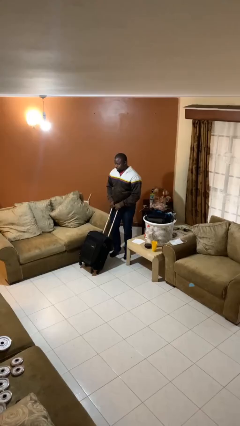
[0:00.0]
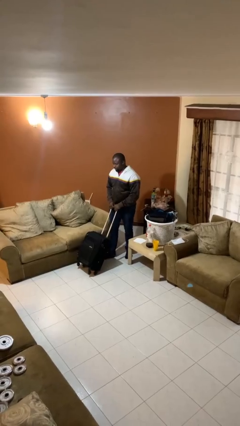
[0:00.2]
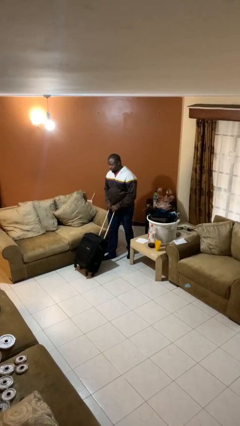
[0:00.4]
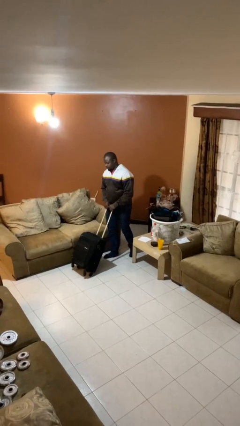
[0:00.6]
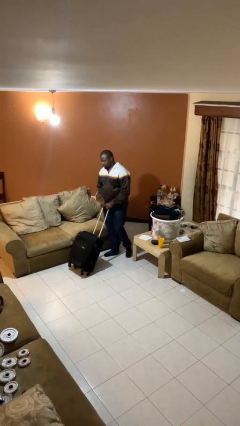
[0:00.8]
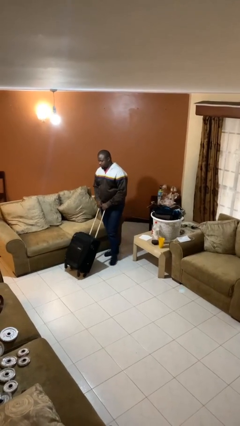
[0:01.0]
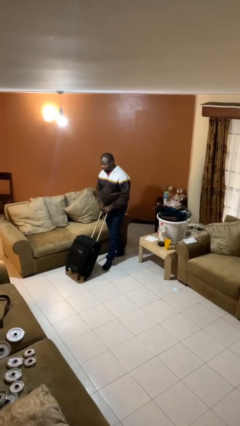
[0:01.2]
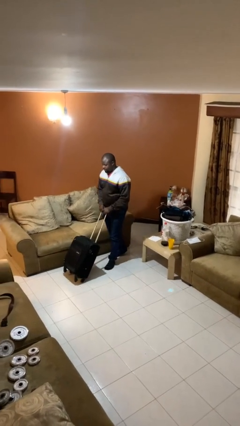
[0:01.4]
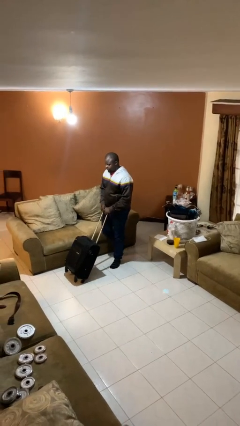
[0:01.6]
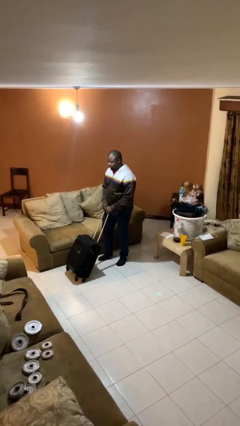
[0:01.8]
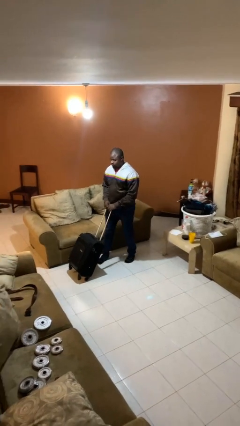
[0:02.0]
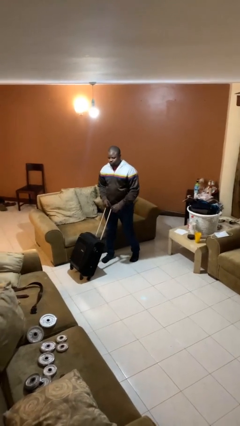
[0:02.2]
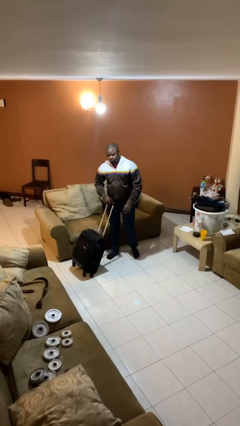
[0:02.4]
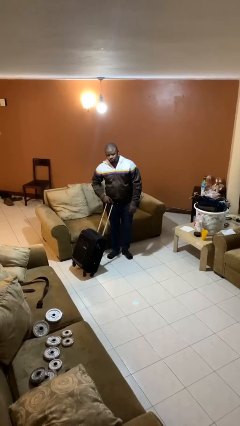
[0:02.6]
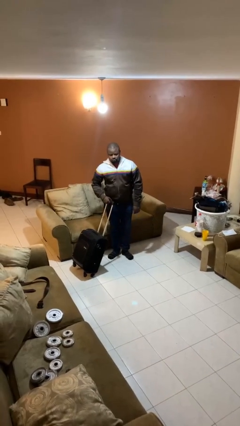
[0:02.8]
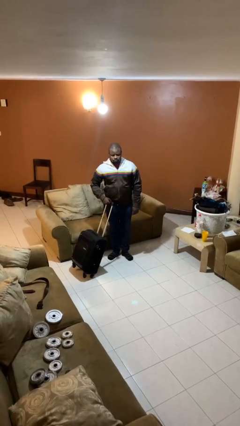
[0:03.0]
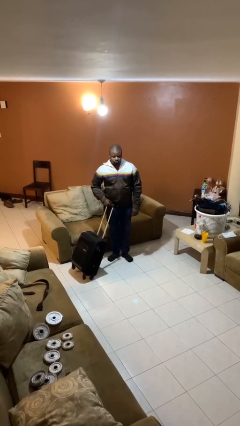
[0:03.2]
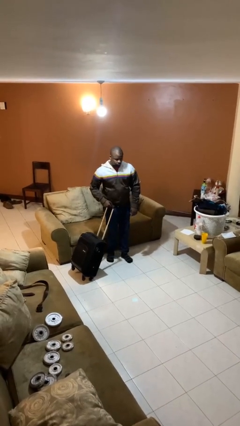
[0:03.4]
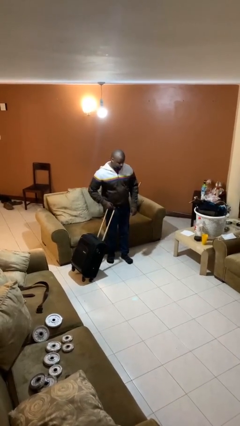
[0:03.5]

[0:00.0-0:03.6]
person pushes wheeled cart

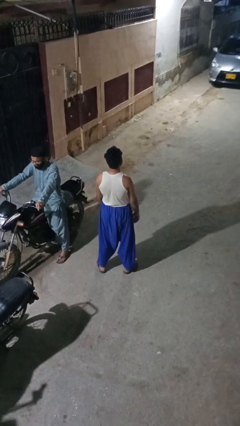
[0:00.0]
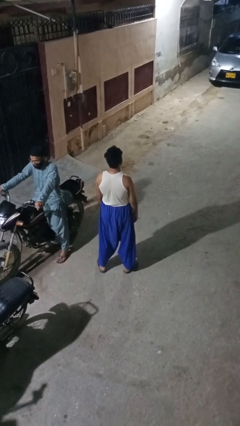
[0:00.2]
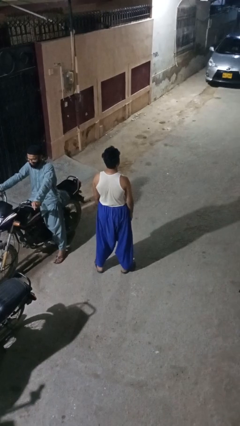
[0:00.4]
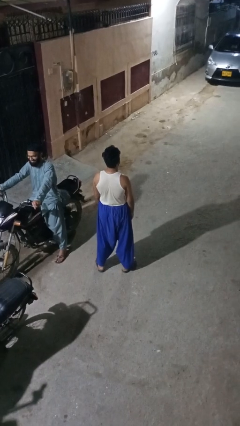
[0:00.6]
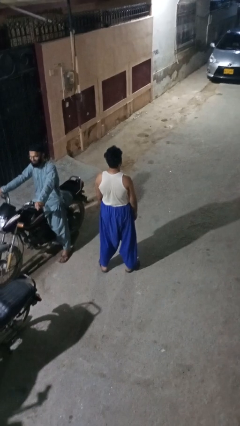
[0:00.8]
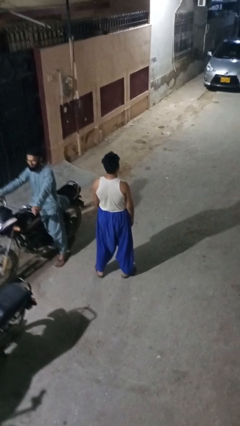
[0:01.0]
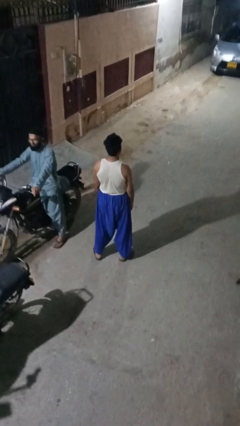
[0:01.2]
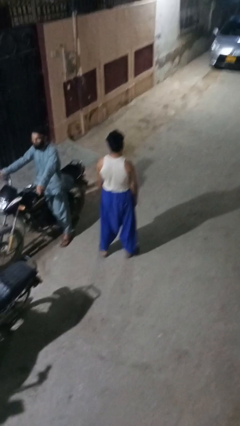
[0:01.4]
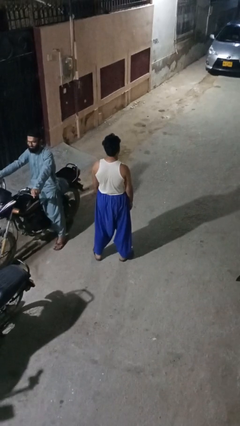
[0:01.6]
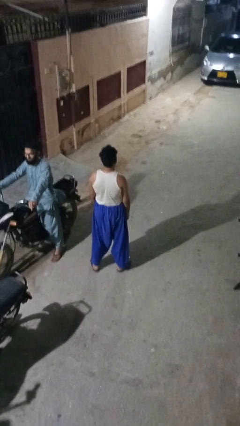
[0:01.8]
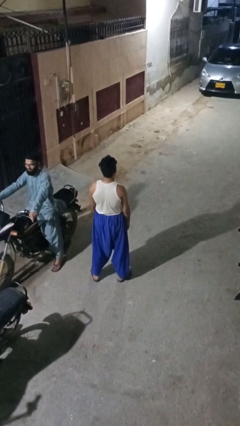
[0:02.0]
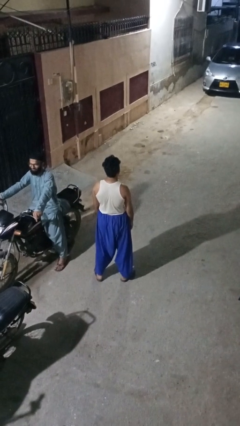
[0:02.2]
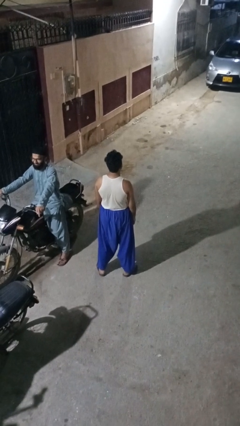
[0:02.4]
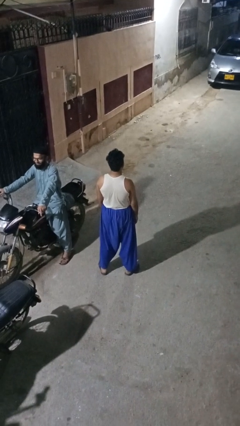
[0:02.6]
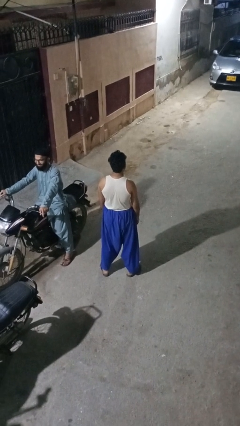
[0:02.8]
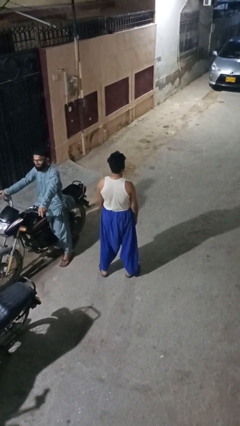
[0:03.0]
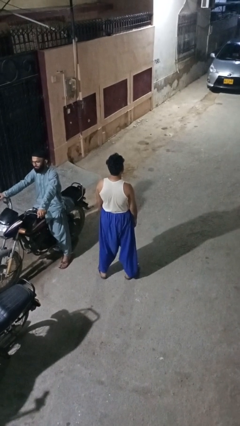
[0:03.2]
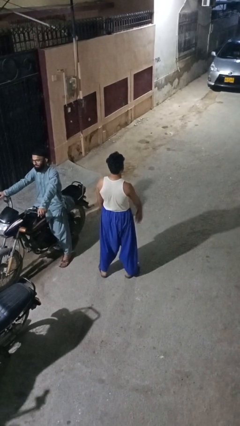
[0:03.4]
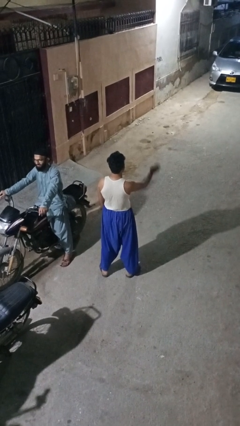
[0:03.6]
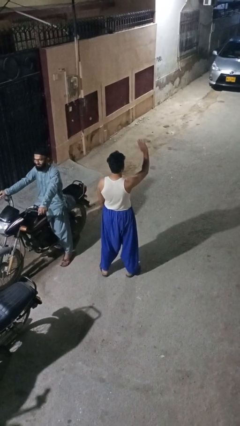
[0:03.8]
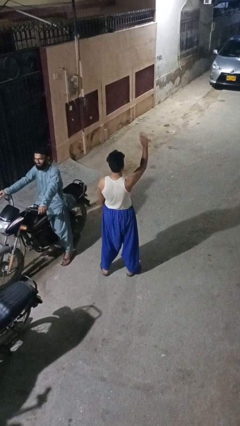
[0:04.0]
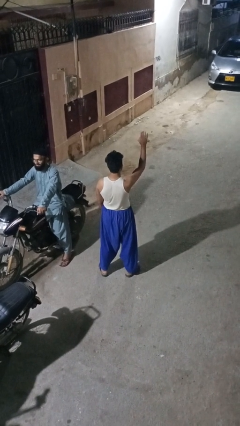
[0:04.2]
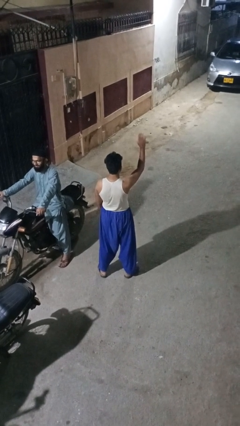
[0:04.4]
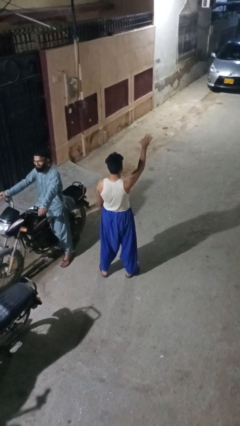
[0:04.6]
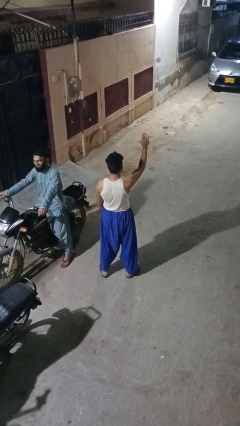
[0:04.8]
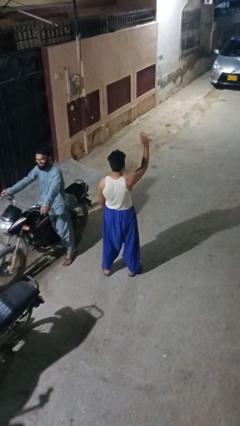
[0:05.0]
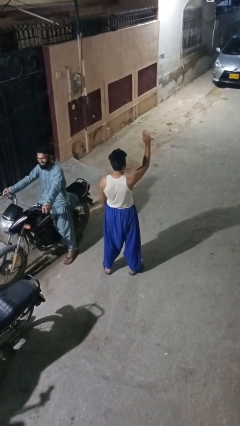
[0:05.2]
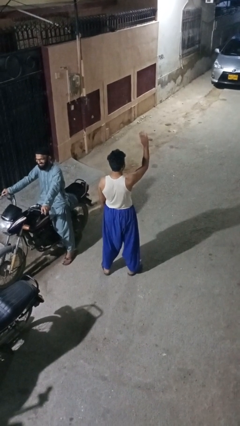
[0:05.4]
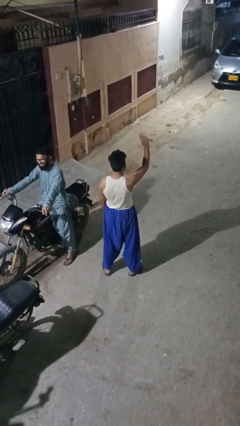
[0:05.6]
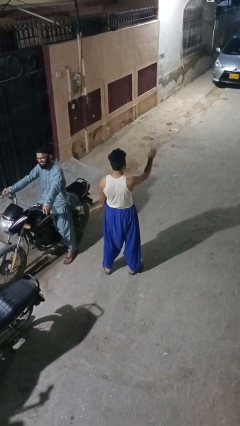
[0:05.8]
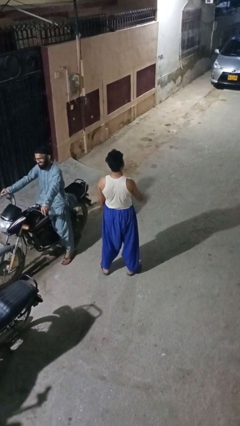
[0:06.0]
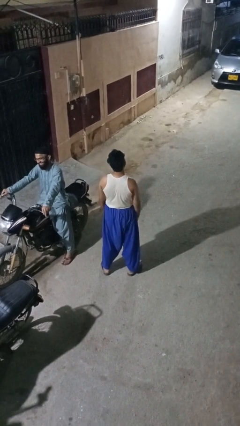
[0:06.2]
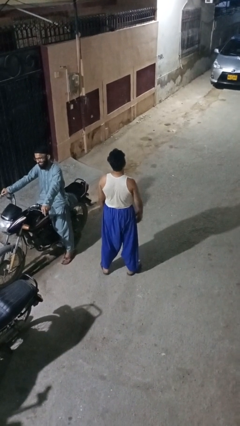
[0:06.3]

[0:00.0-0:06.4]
person waves at person

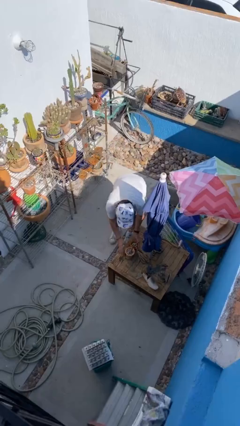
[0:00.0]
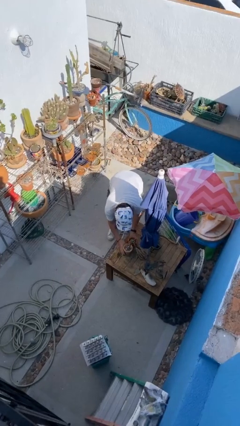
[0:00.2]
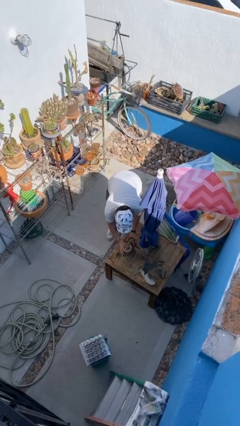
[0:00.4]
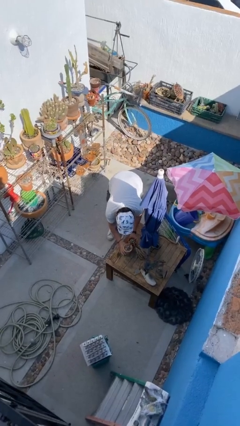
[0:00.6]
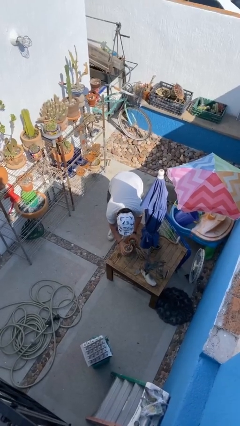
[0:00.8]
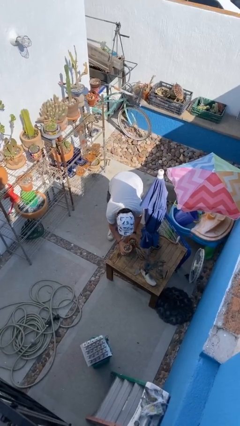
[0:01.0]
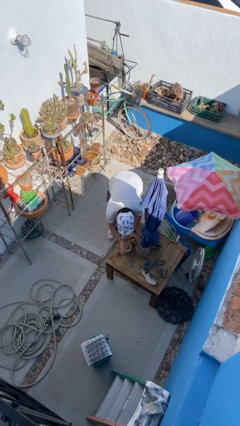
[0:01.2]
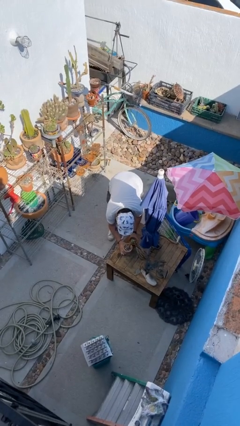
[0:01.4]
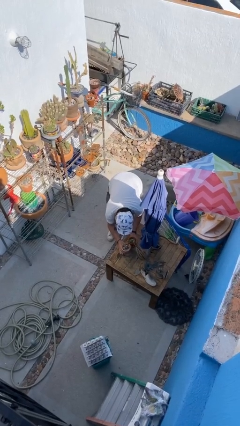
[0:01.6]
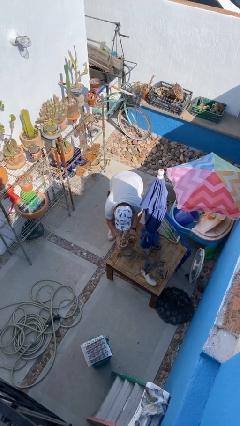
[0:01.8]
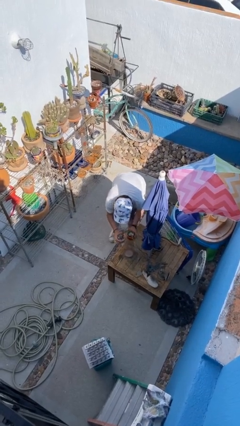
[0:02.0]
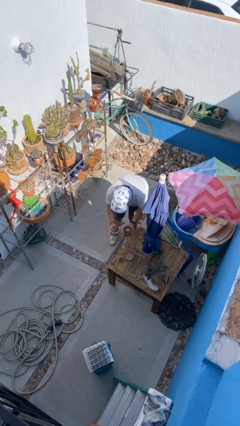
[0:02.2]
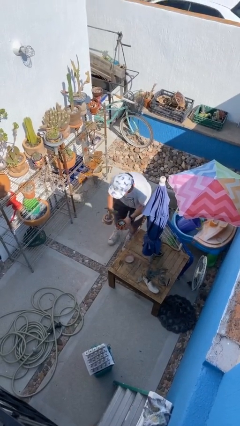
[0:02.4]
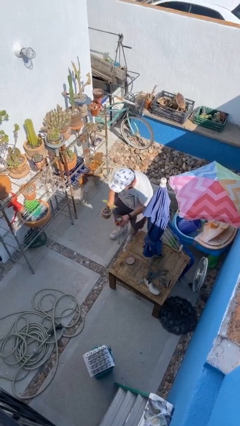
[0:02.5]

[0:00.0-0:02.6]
person picks up object from table

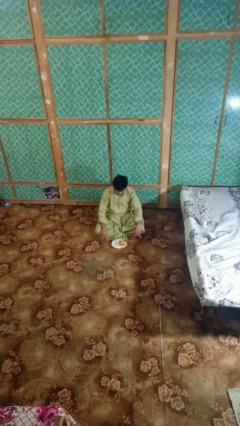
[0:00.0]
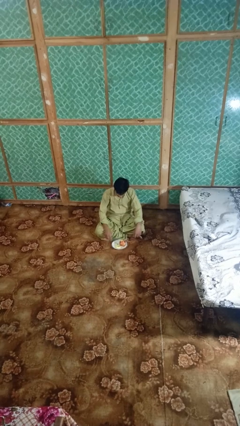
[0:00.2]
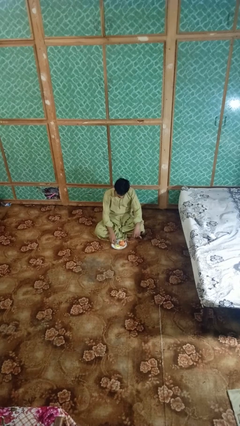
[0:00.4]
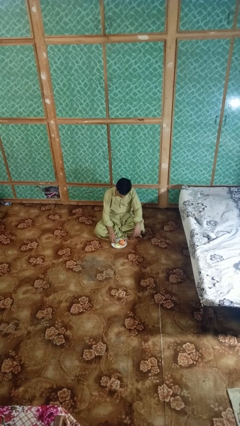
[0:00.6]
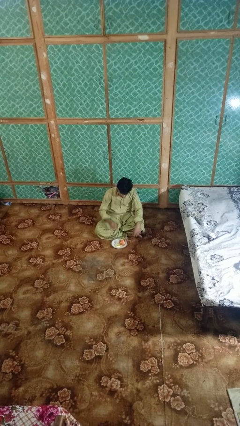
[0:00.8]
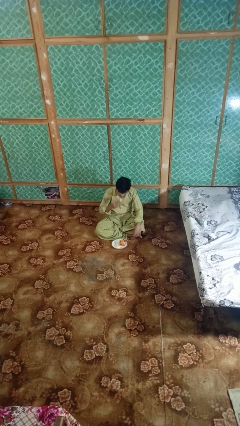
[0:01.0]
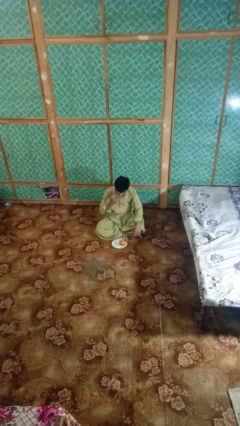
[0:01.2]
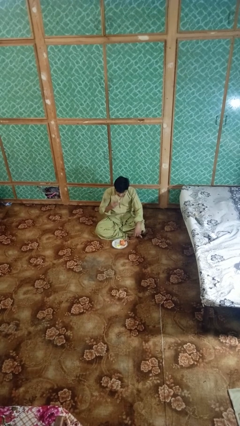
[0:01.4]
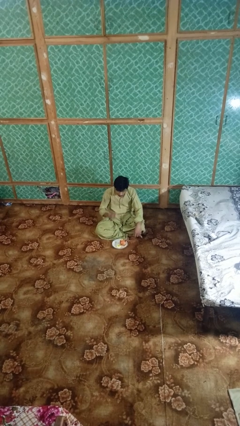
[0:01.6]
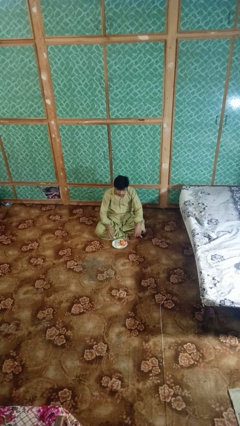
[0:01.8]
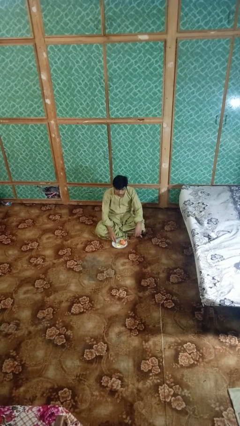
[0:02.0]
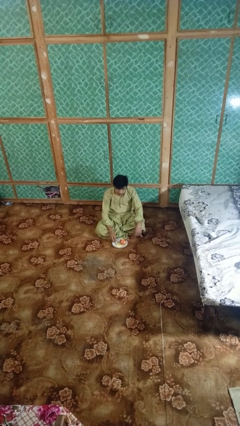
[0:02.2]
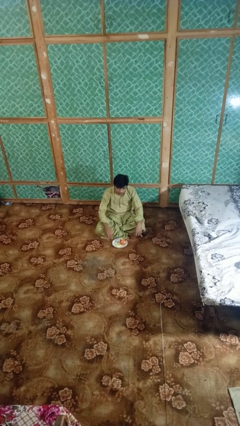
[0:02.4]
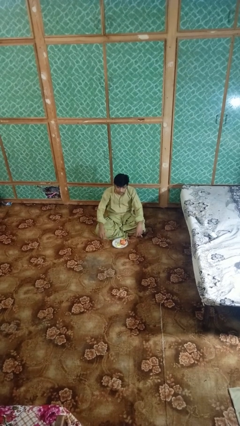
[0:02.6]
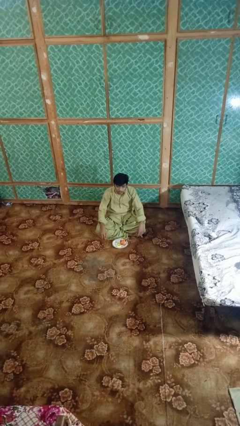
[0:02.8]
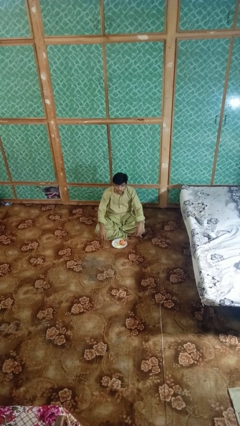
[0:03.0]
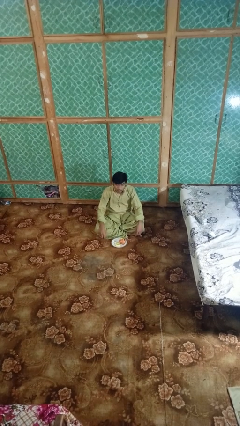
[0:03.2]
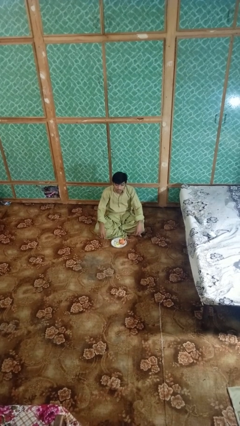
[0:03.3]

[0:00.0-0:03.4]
person eats apple

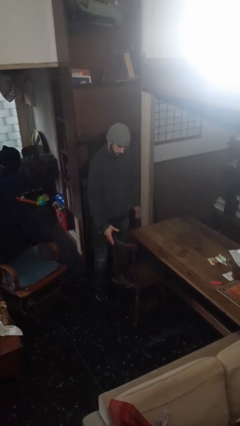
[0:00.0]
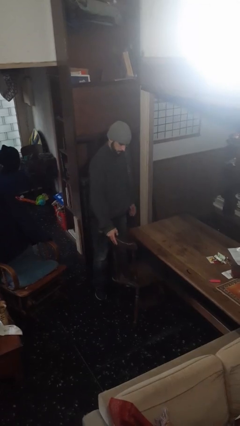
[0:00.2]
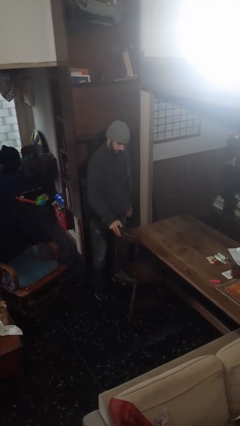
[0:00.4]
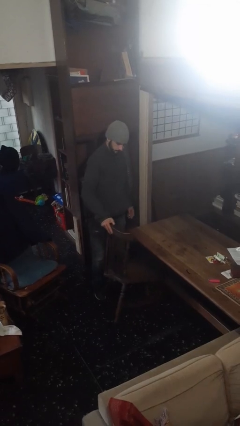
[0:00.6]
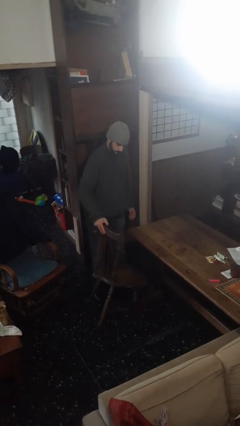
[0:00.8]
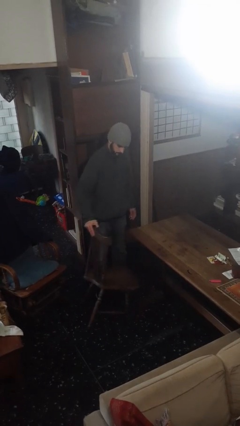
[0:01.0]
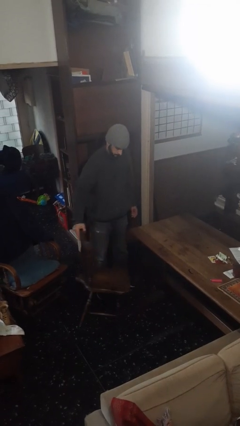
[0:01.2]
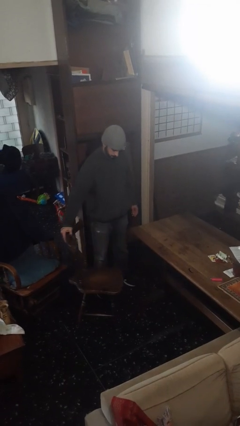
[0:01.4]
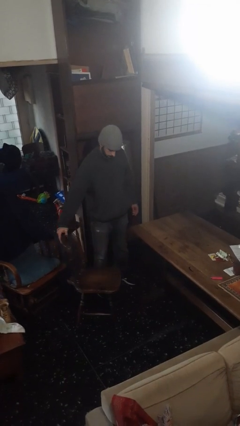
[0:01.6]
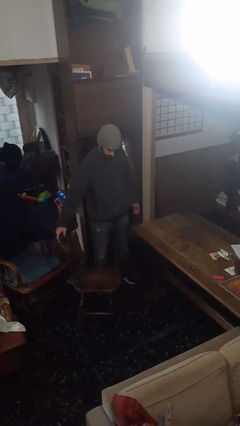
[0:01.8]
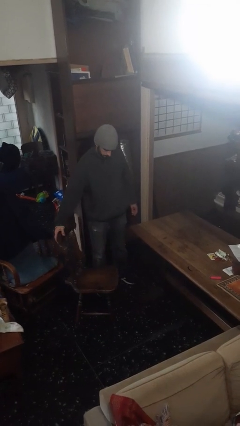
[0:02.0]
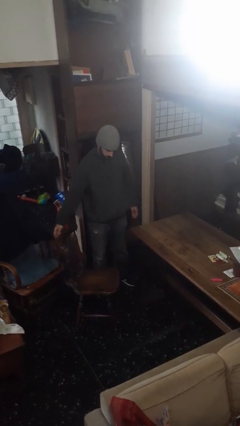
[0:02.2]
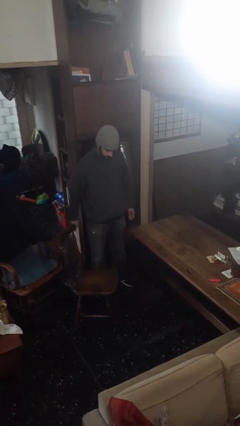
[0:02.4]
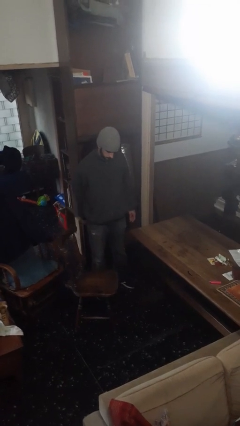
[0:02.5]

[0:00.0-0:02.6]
person pulls out chair
